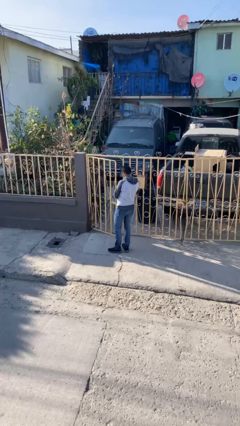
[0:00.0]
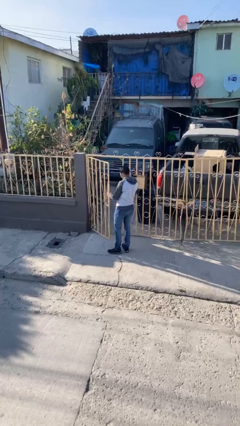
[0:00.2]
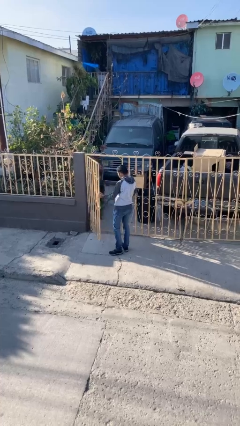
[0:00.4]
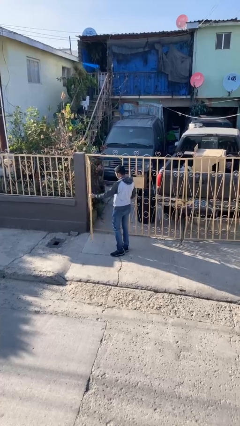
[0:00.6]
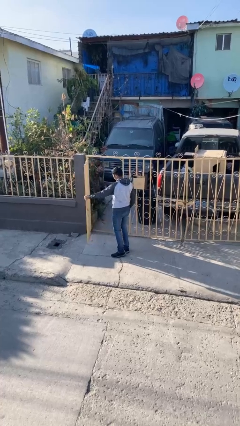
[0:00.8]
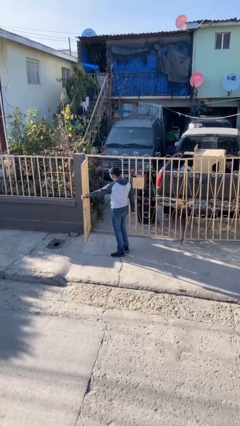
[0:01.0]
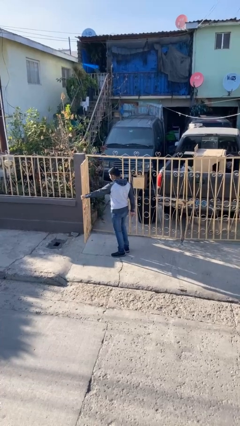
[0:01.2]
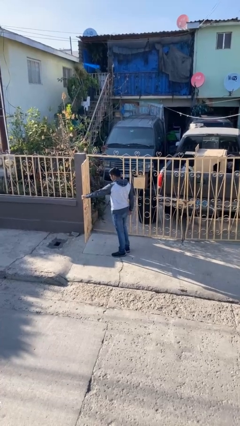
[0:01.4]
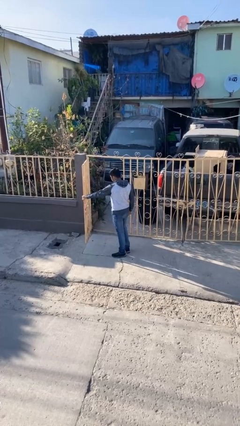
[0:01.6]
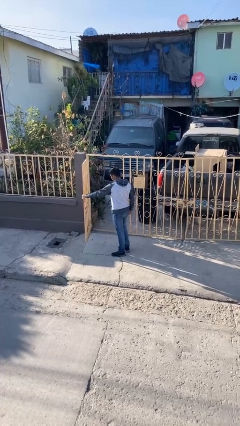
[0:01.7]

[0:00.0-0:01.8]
person opens facility door

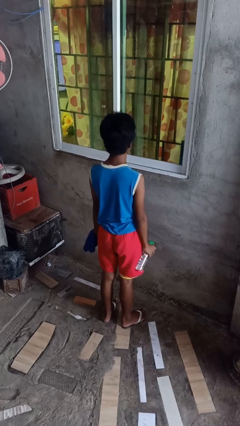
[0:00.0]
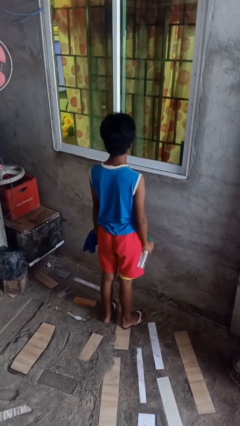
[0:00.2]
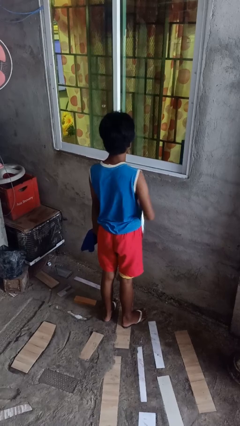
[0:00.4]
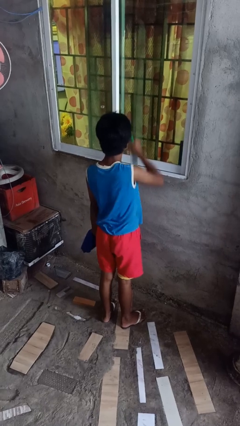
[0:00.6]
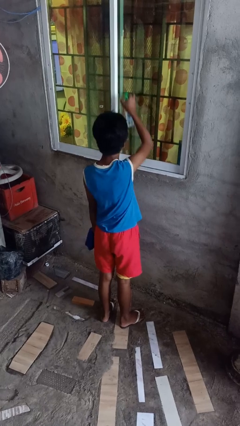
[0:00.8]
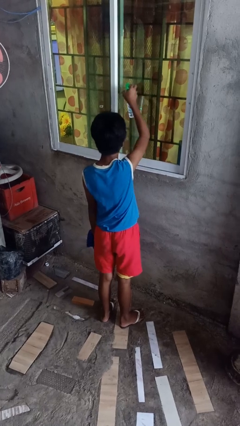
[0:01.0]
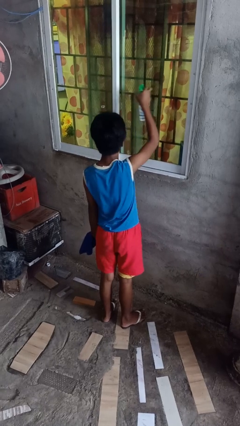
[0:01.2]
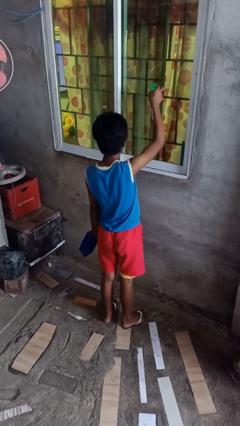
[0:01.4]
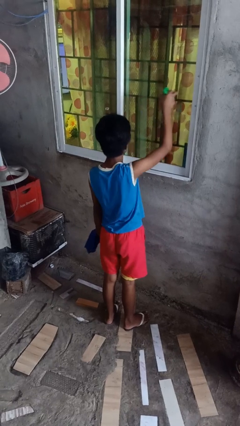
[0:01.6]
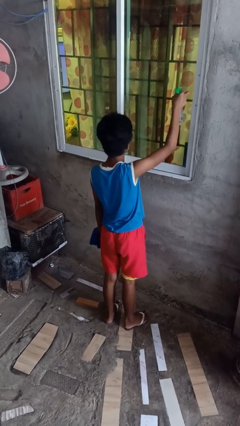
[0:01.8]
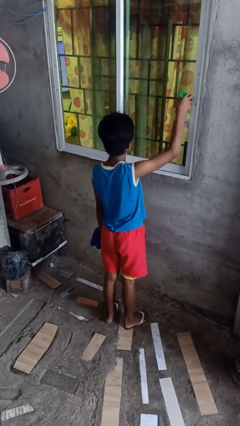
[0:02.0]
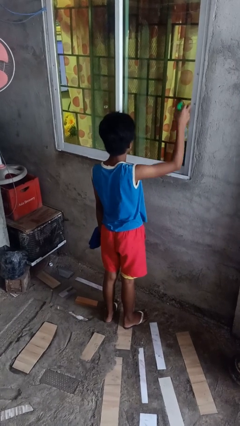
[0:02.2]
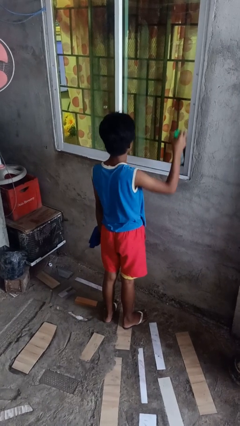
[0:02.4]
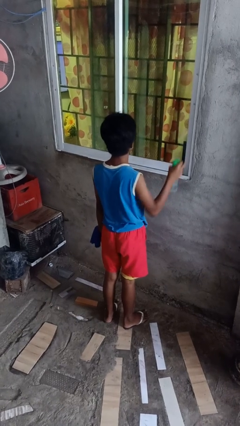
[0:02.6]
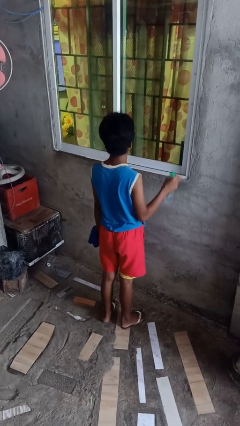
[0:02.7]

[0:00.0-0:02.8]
person sprays from bottle

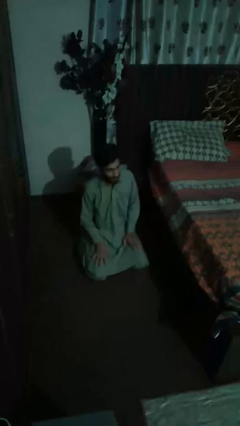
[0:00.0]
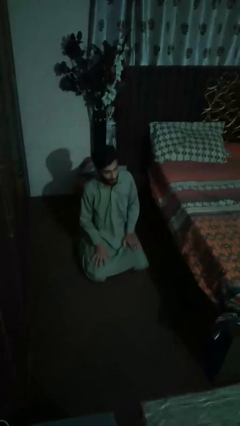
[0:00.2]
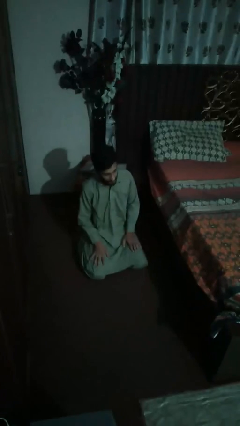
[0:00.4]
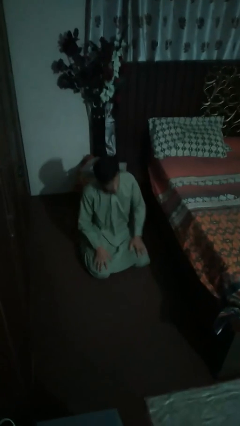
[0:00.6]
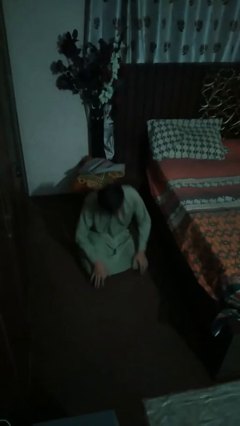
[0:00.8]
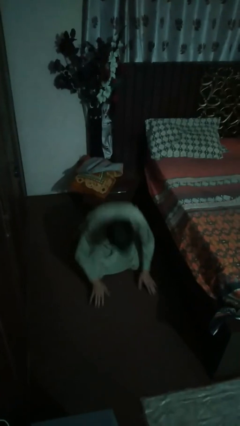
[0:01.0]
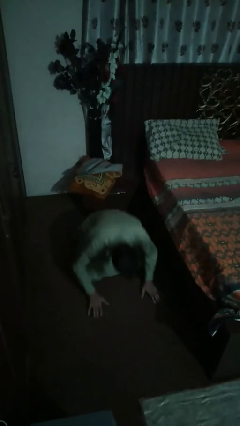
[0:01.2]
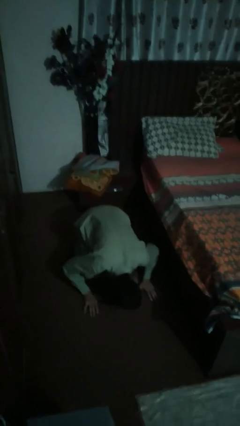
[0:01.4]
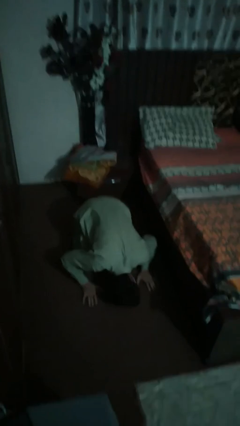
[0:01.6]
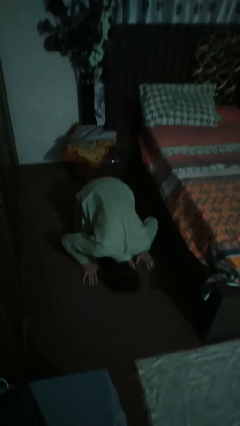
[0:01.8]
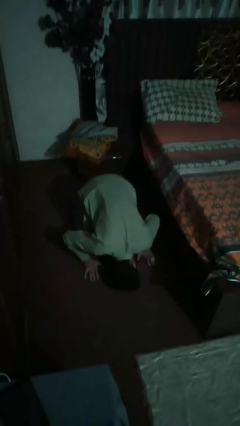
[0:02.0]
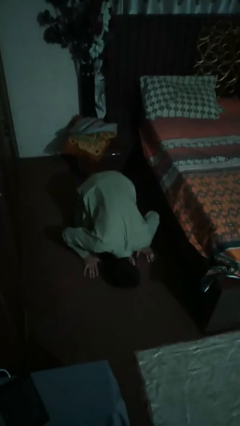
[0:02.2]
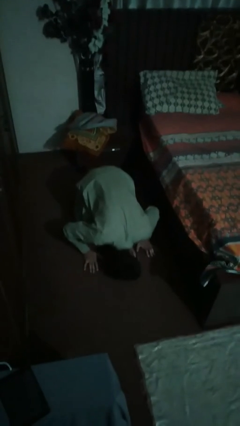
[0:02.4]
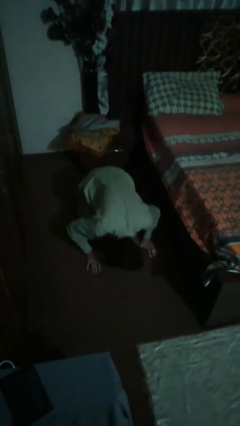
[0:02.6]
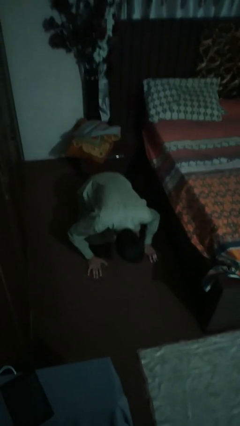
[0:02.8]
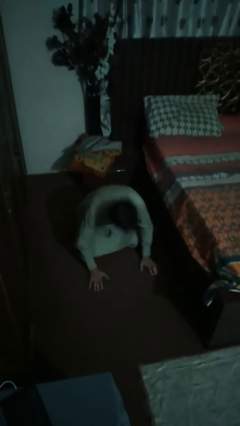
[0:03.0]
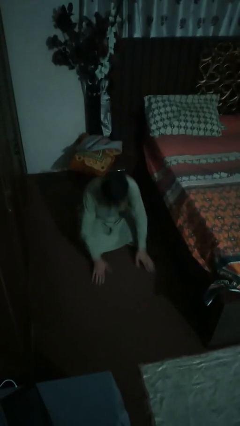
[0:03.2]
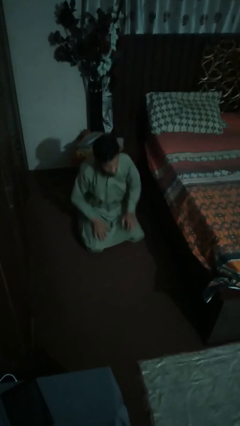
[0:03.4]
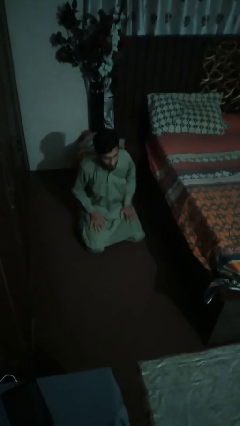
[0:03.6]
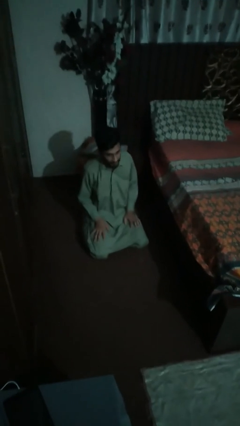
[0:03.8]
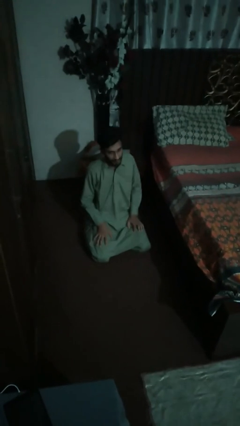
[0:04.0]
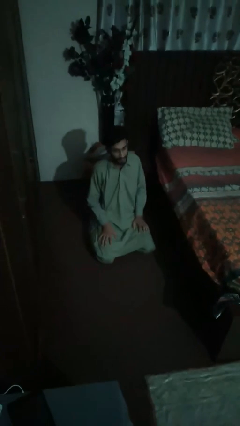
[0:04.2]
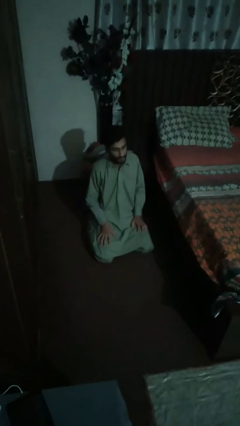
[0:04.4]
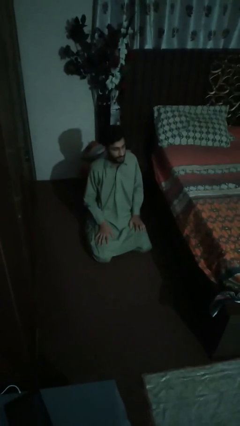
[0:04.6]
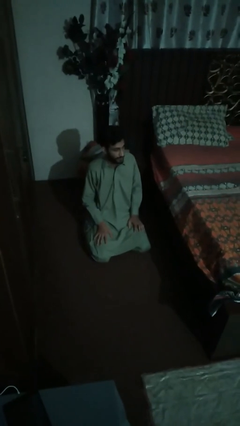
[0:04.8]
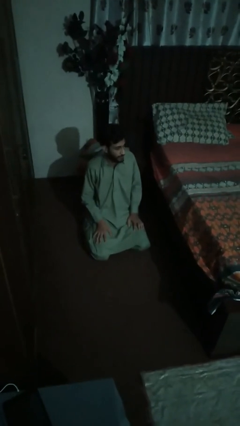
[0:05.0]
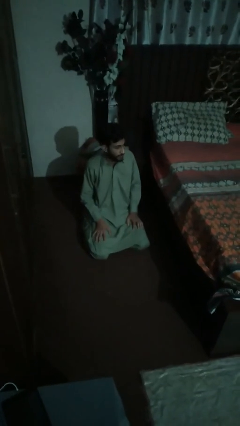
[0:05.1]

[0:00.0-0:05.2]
person searches under bed

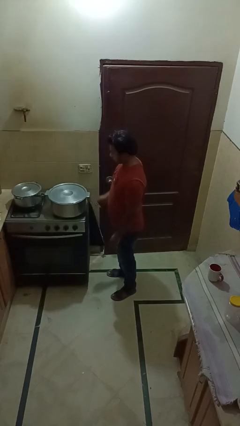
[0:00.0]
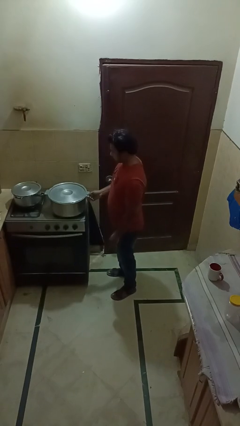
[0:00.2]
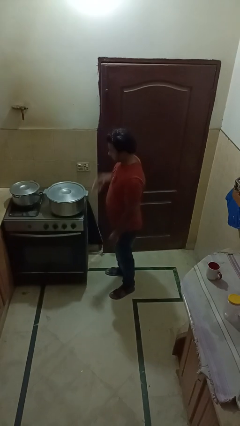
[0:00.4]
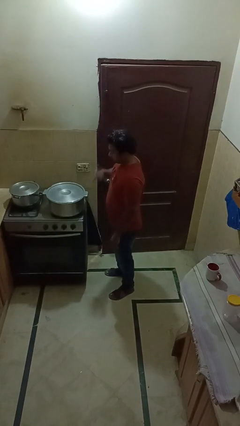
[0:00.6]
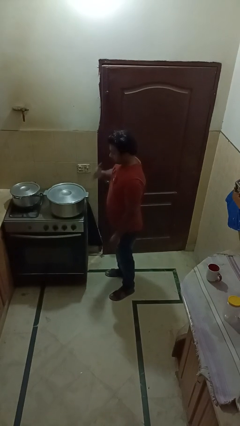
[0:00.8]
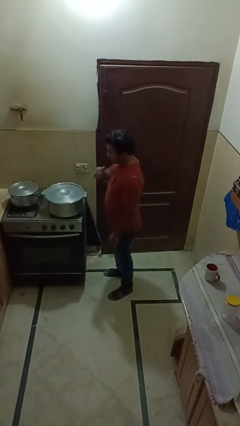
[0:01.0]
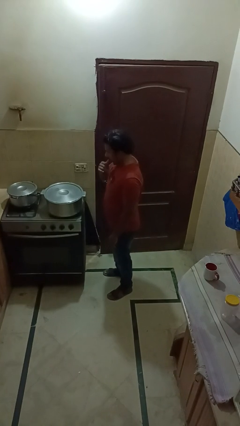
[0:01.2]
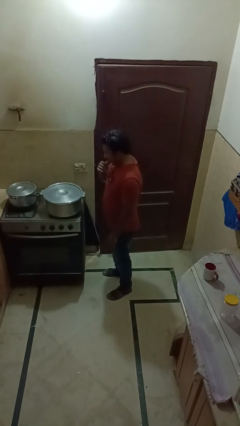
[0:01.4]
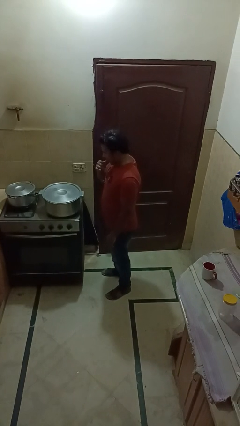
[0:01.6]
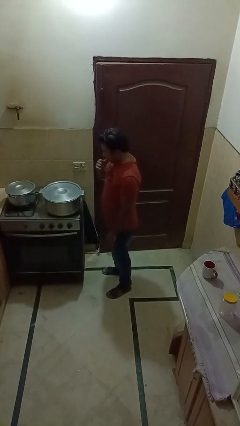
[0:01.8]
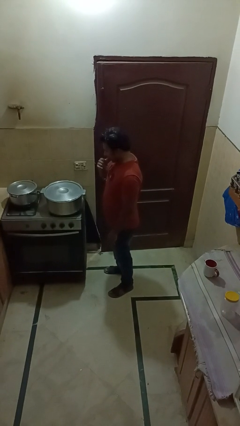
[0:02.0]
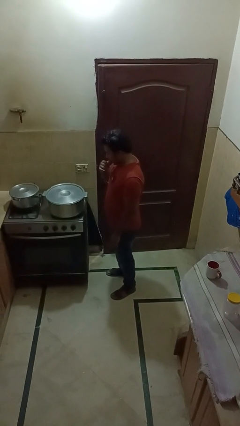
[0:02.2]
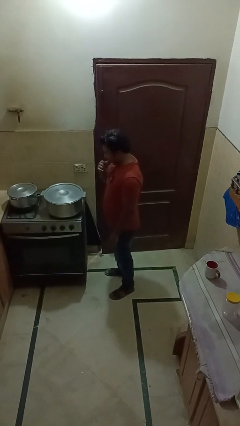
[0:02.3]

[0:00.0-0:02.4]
person burns hand

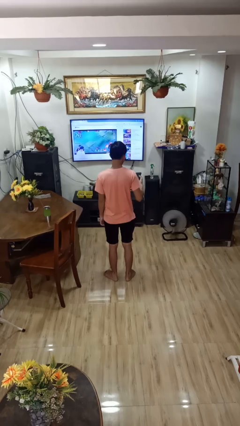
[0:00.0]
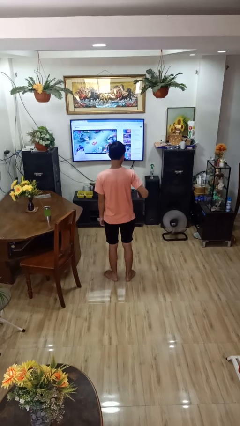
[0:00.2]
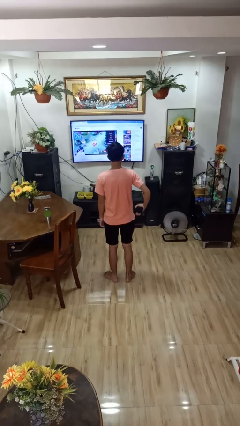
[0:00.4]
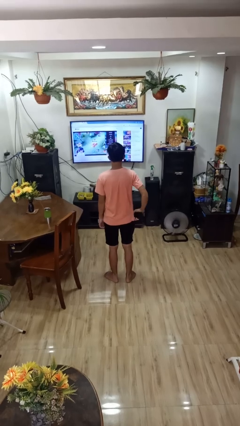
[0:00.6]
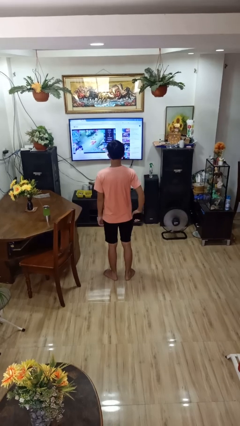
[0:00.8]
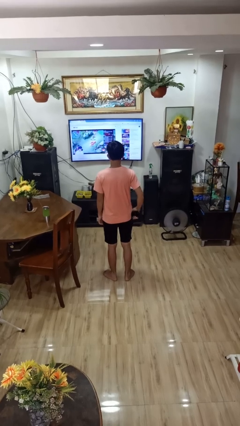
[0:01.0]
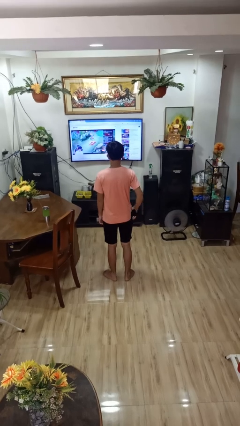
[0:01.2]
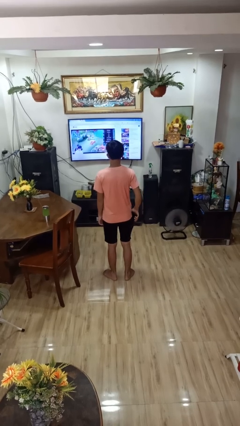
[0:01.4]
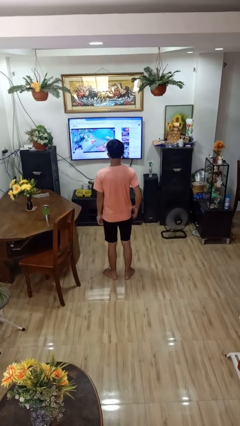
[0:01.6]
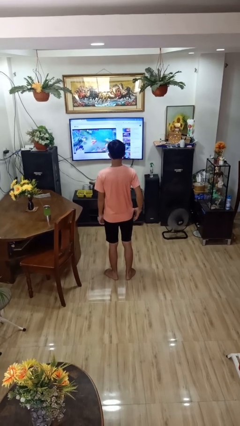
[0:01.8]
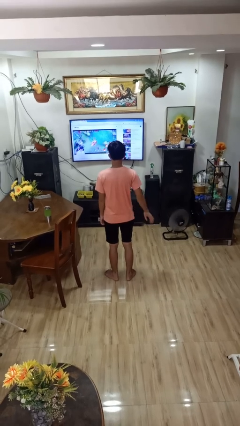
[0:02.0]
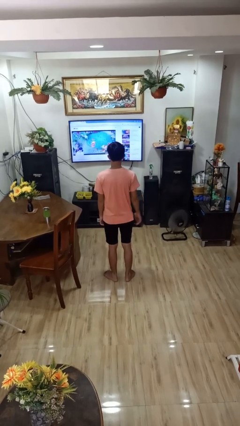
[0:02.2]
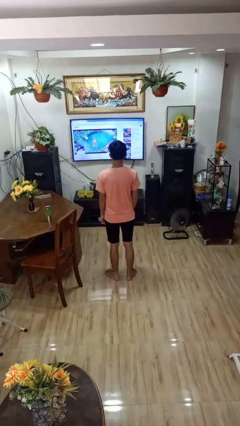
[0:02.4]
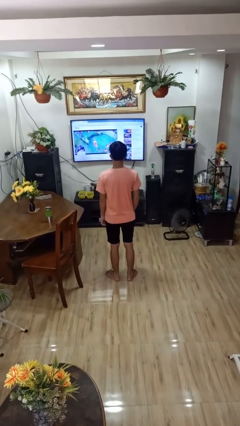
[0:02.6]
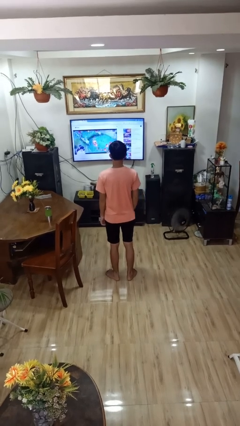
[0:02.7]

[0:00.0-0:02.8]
person puts phone into pocket

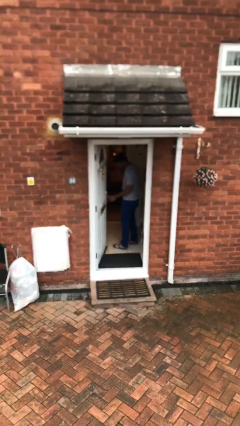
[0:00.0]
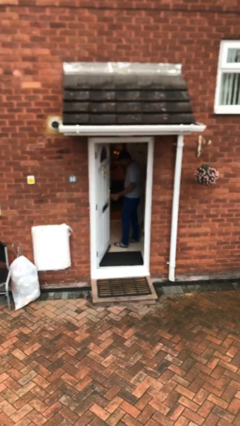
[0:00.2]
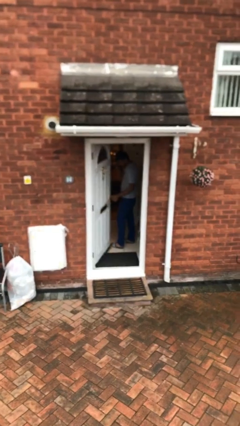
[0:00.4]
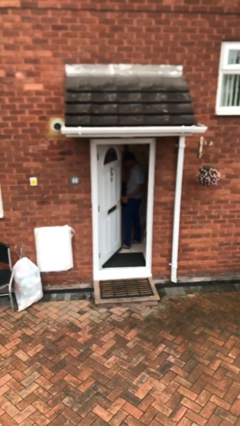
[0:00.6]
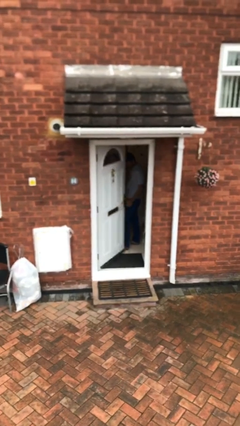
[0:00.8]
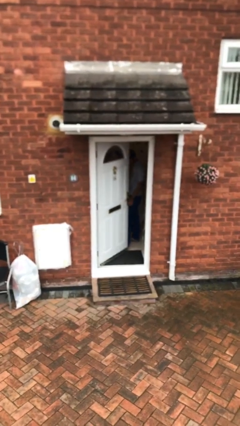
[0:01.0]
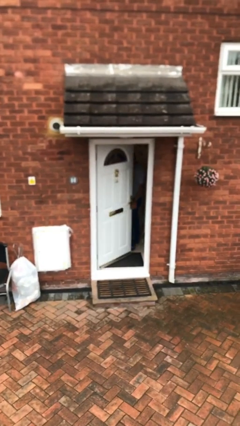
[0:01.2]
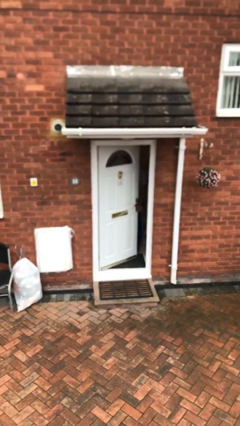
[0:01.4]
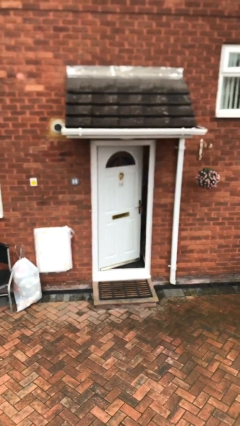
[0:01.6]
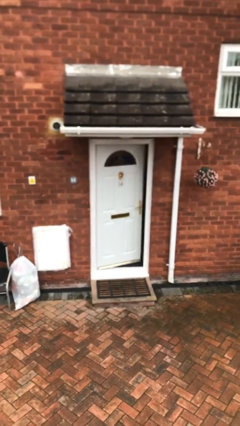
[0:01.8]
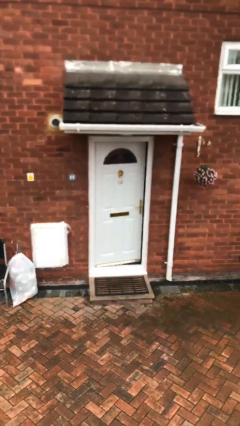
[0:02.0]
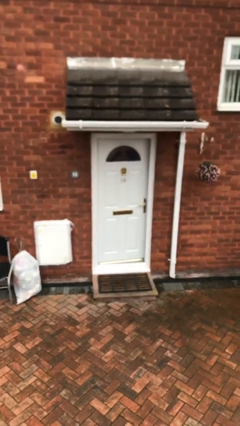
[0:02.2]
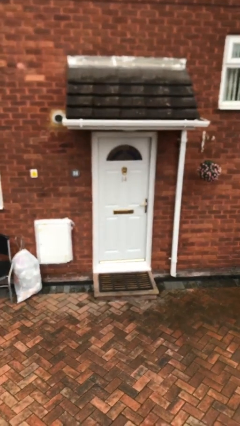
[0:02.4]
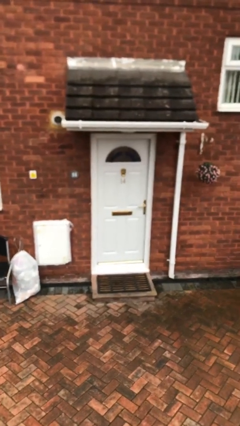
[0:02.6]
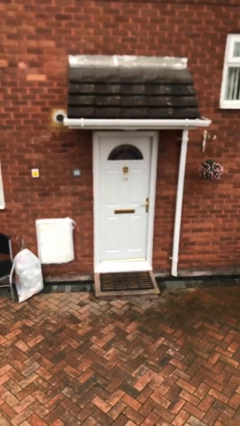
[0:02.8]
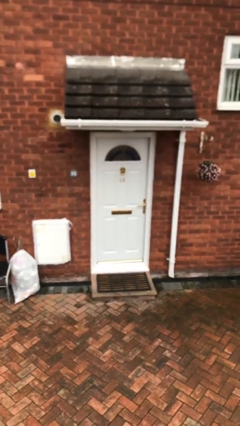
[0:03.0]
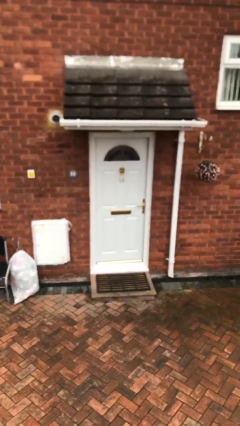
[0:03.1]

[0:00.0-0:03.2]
person closes facility door
